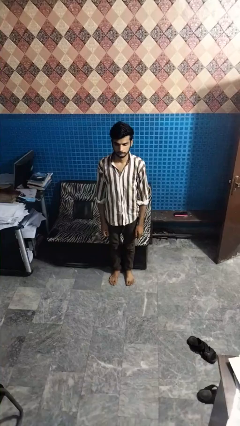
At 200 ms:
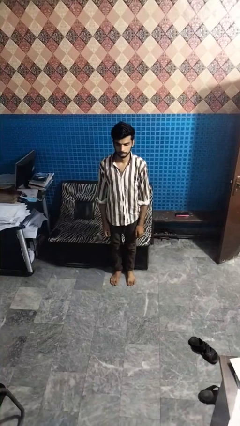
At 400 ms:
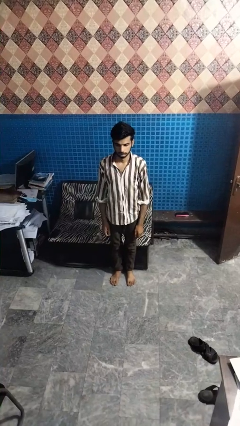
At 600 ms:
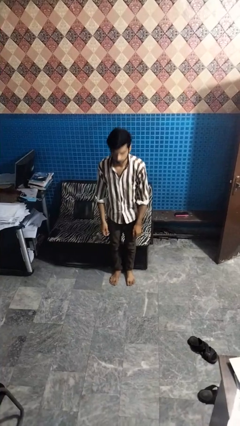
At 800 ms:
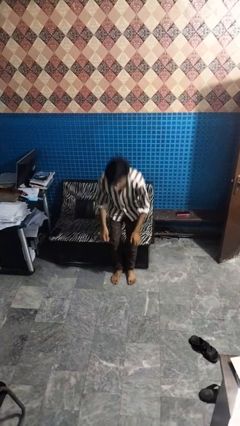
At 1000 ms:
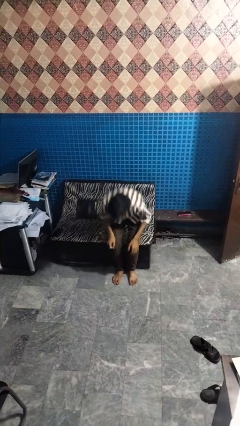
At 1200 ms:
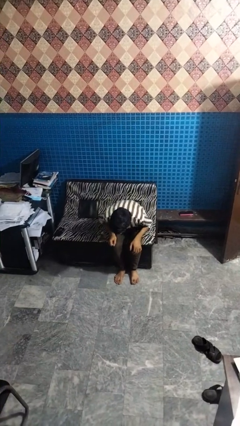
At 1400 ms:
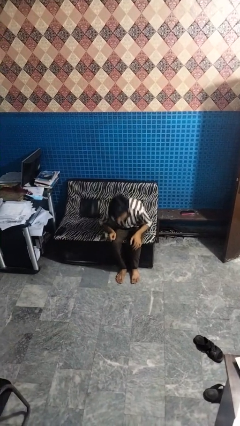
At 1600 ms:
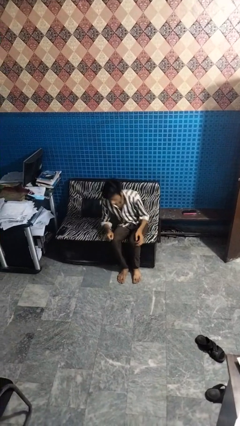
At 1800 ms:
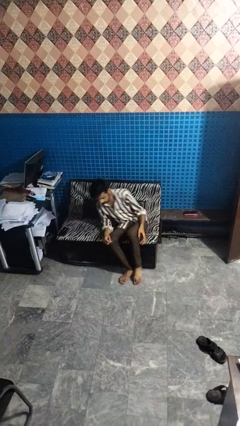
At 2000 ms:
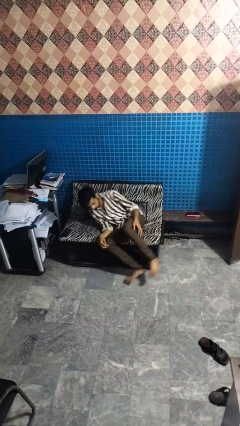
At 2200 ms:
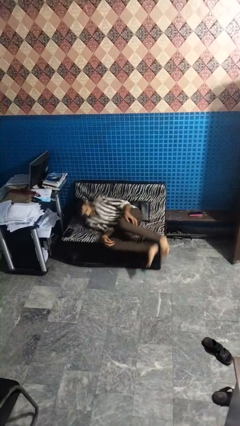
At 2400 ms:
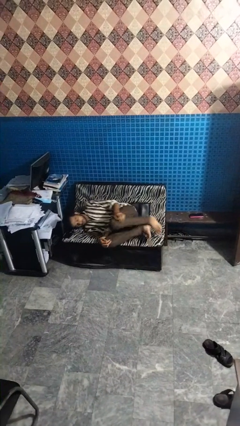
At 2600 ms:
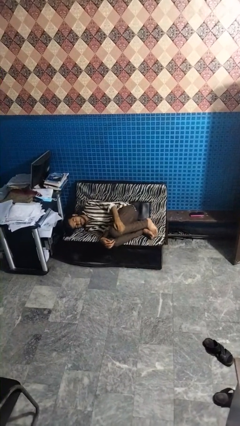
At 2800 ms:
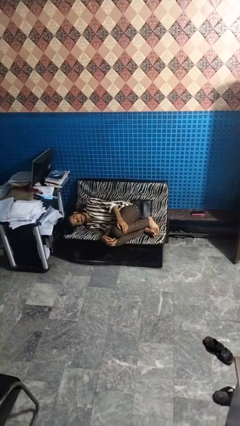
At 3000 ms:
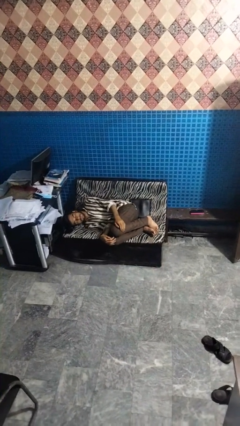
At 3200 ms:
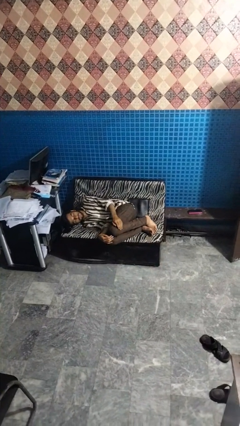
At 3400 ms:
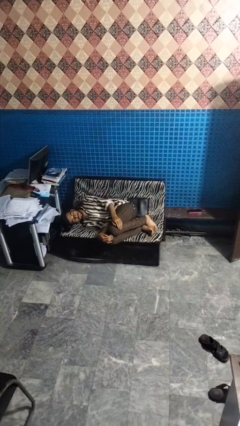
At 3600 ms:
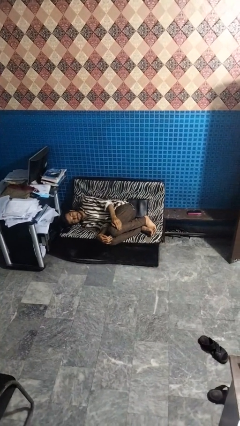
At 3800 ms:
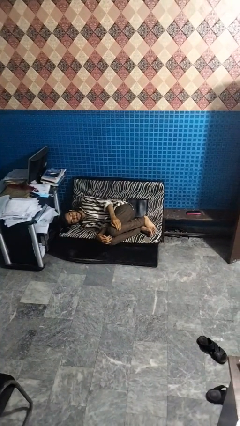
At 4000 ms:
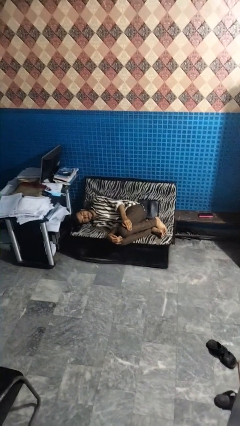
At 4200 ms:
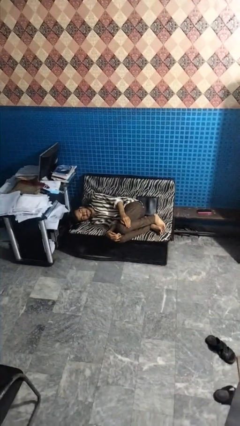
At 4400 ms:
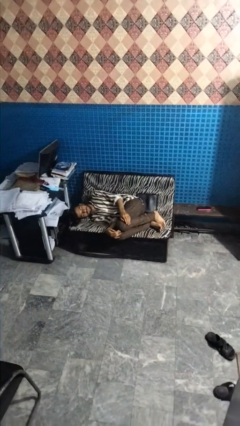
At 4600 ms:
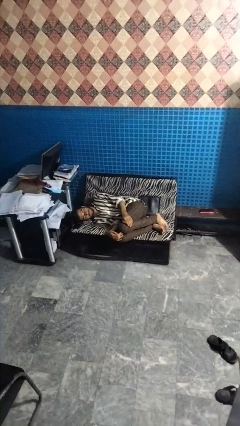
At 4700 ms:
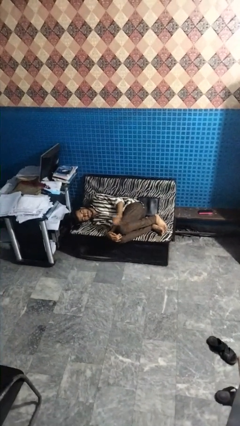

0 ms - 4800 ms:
person lies down on couch

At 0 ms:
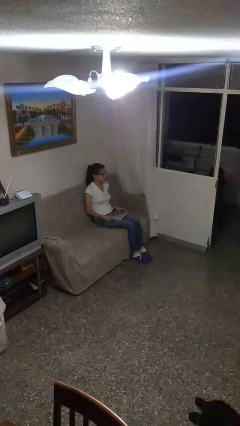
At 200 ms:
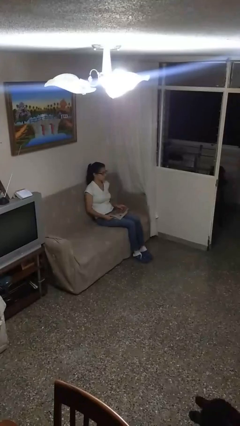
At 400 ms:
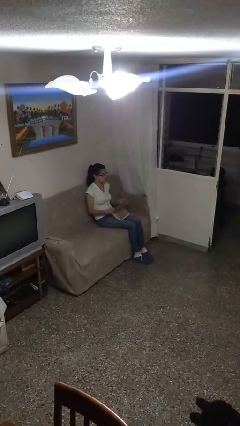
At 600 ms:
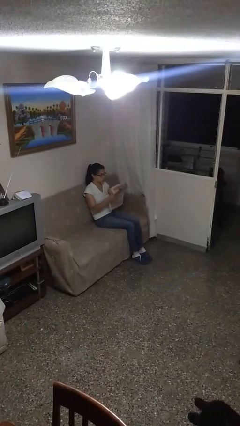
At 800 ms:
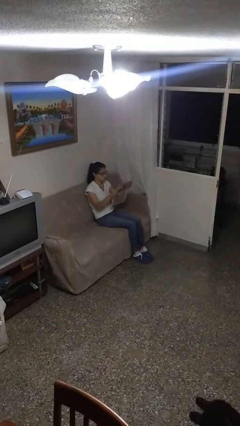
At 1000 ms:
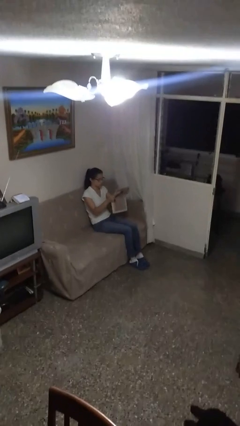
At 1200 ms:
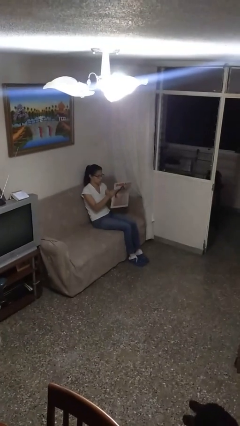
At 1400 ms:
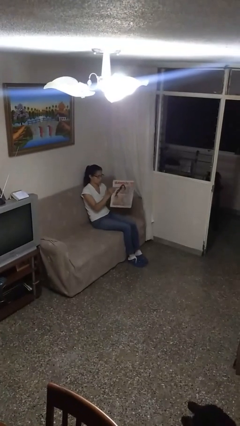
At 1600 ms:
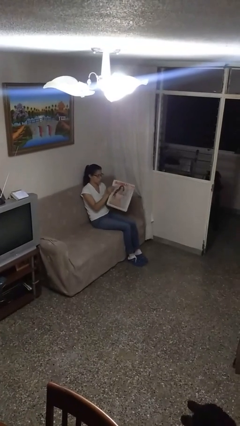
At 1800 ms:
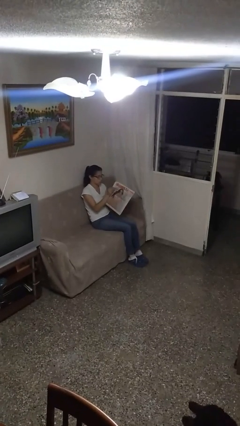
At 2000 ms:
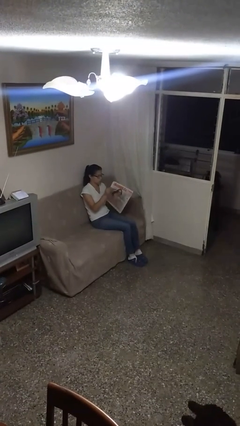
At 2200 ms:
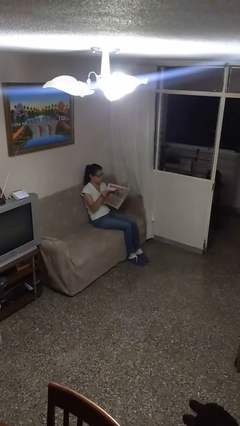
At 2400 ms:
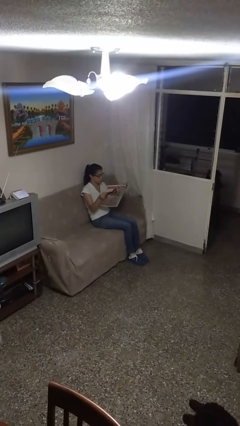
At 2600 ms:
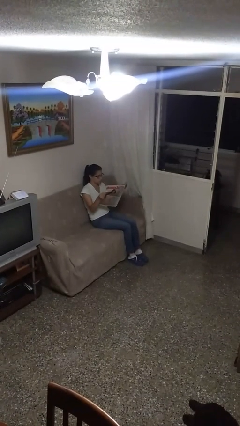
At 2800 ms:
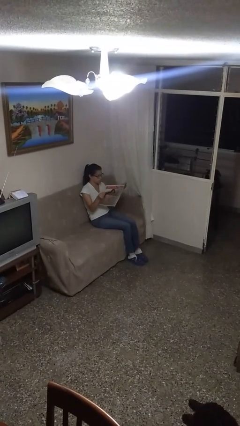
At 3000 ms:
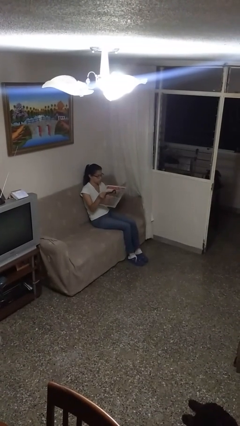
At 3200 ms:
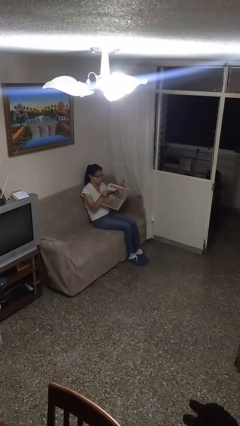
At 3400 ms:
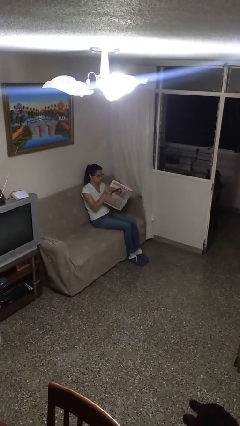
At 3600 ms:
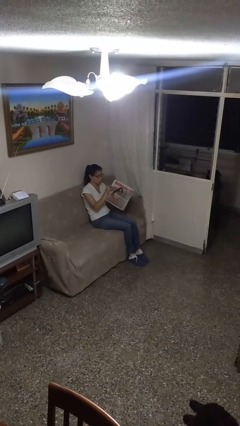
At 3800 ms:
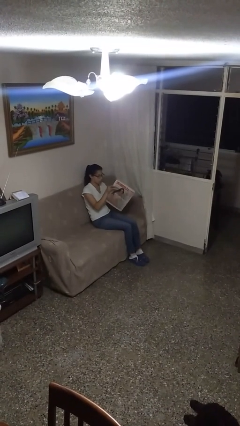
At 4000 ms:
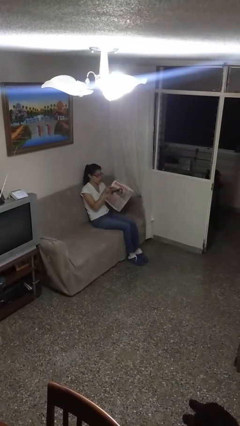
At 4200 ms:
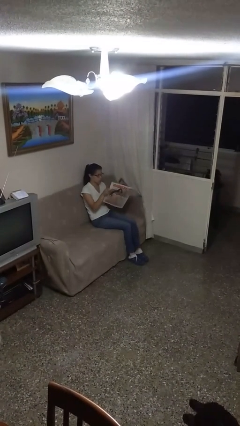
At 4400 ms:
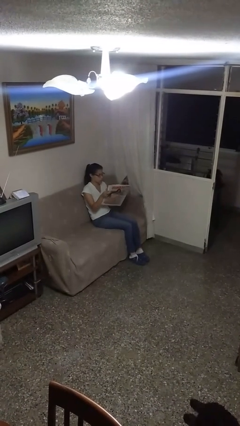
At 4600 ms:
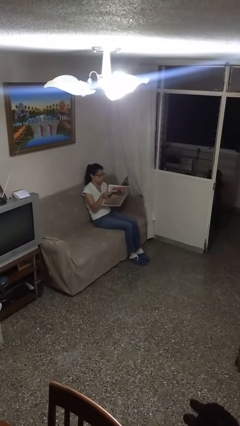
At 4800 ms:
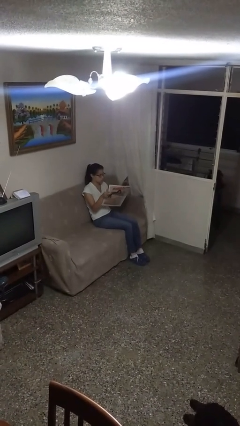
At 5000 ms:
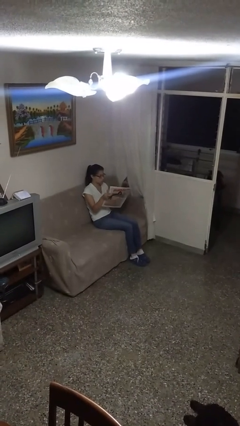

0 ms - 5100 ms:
person reads newspaper

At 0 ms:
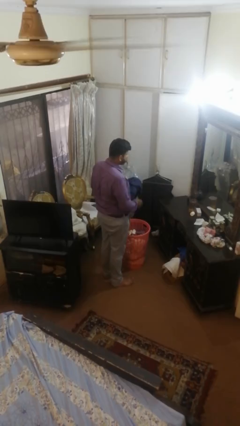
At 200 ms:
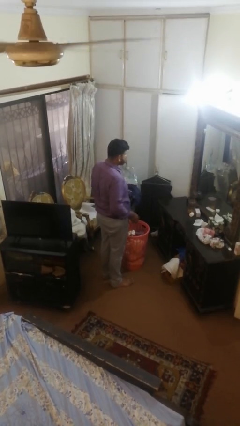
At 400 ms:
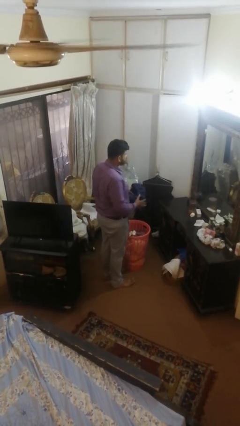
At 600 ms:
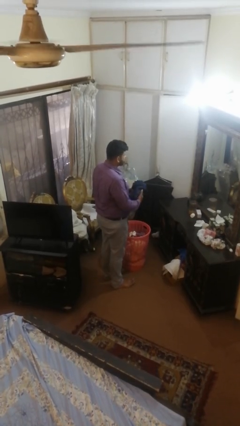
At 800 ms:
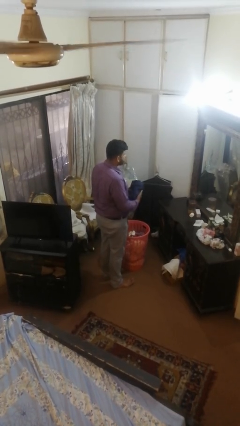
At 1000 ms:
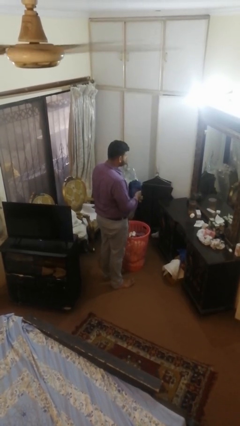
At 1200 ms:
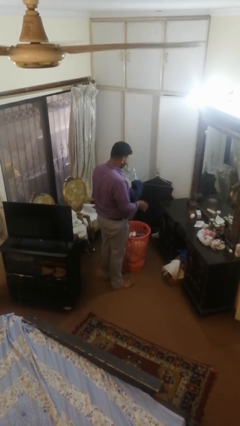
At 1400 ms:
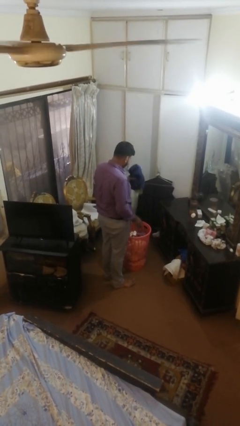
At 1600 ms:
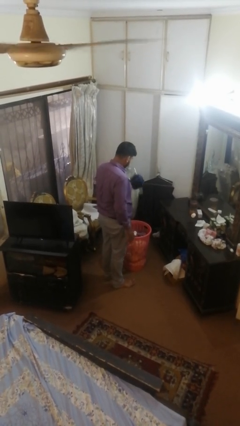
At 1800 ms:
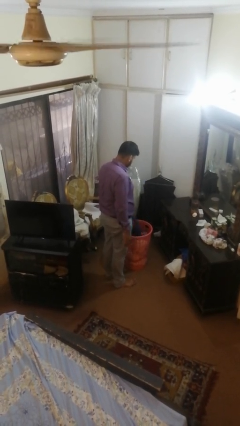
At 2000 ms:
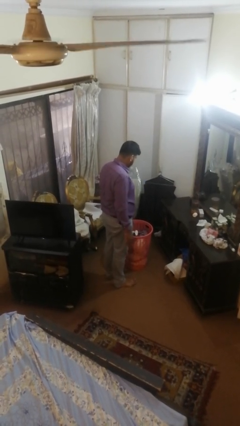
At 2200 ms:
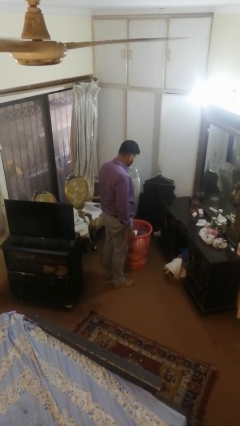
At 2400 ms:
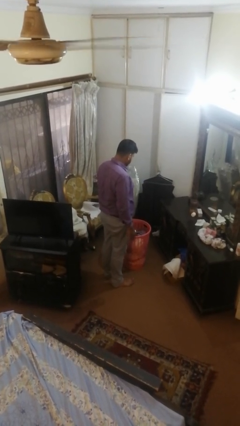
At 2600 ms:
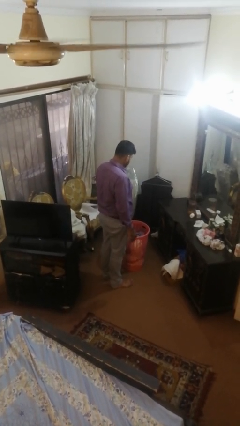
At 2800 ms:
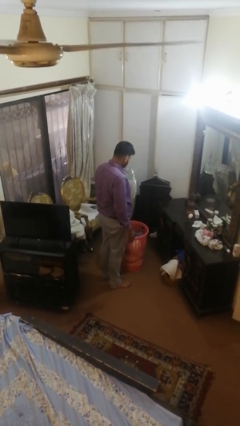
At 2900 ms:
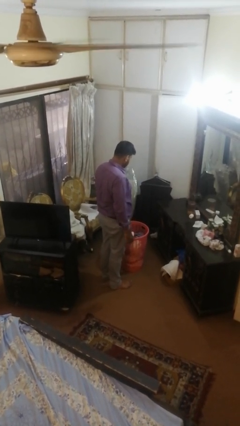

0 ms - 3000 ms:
person puts object into basket

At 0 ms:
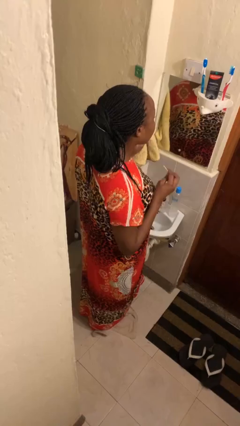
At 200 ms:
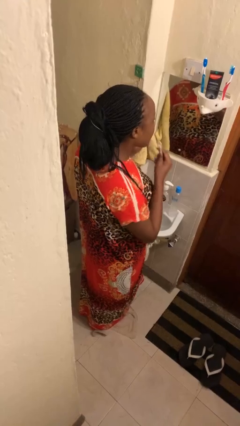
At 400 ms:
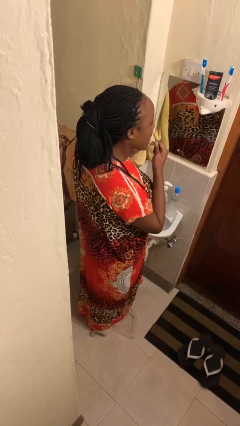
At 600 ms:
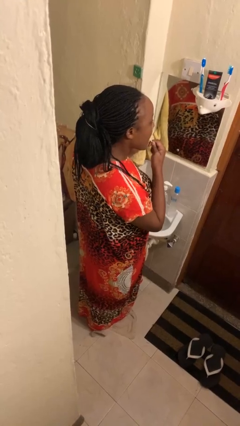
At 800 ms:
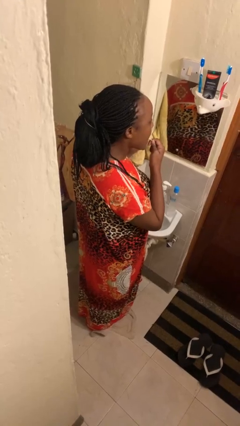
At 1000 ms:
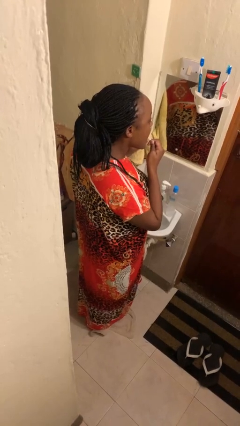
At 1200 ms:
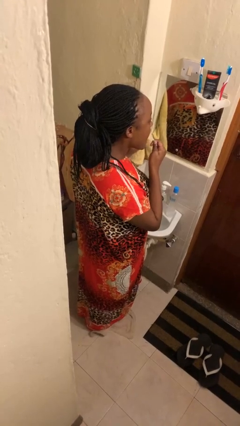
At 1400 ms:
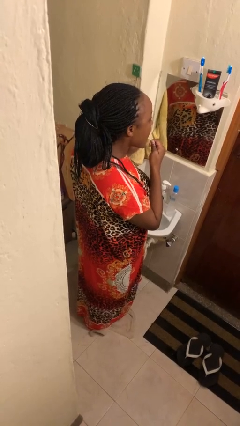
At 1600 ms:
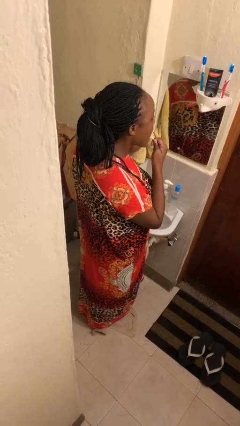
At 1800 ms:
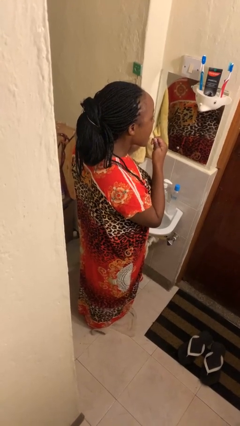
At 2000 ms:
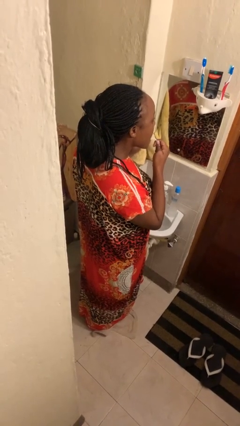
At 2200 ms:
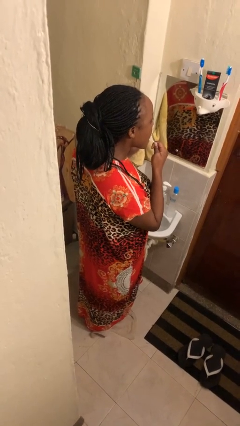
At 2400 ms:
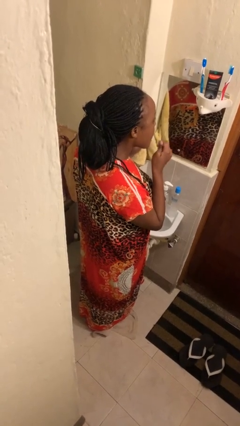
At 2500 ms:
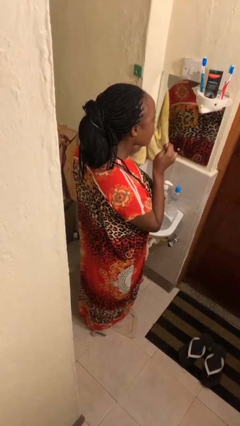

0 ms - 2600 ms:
person flosses

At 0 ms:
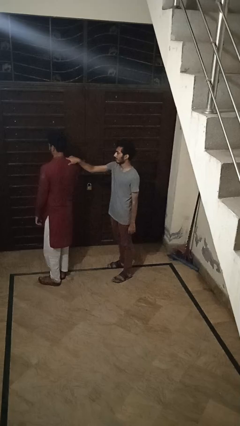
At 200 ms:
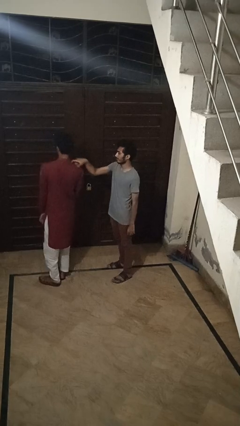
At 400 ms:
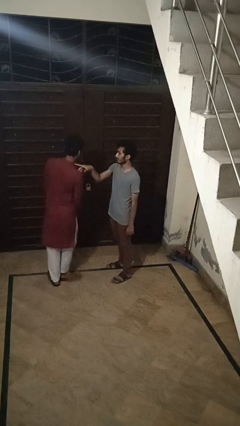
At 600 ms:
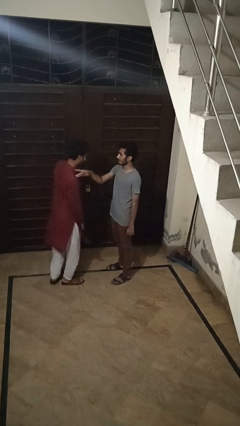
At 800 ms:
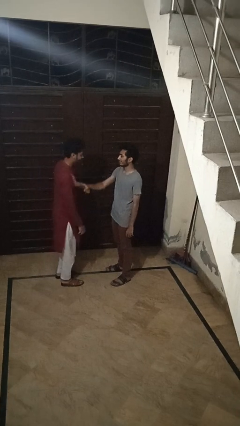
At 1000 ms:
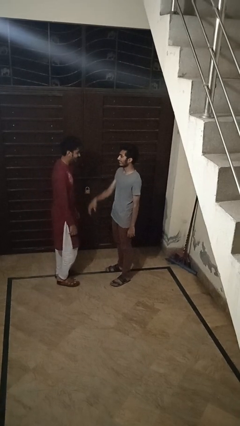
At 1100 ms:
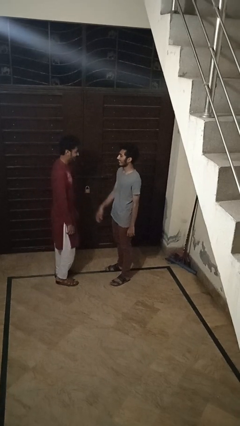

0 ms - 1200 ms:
person spins person around

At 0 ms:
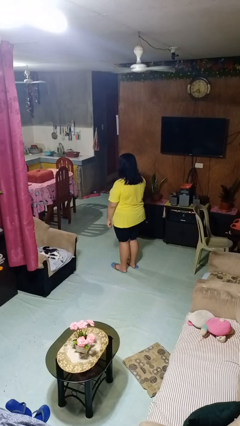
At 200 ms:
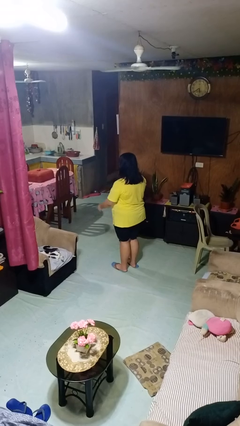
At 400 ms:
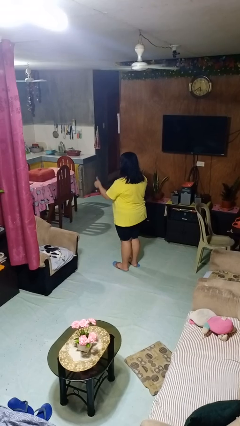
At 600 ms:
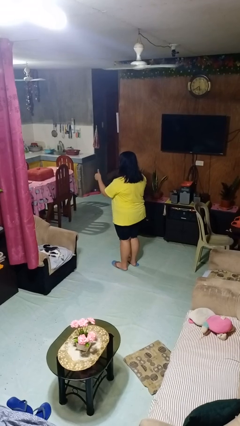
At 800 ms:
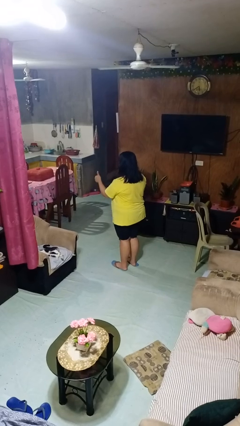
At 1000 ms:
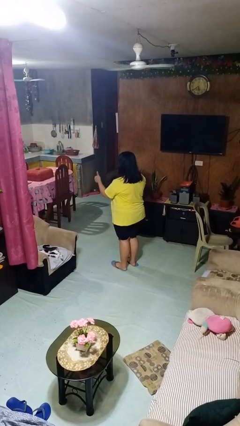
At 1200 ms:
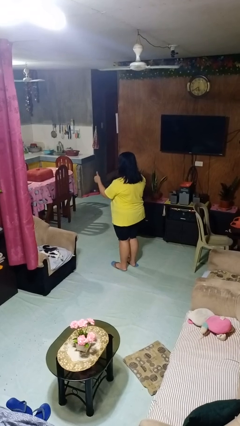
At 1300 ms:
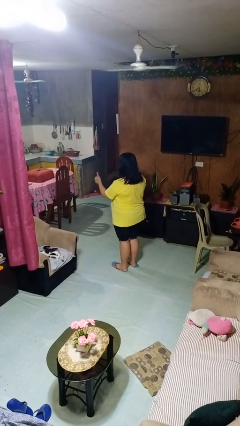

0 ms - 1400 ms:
person gestures thumbs up
